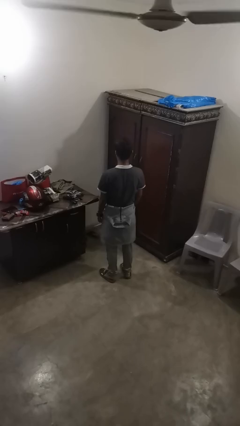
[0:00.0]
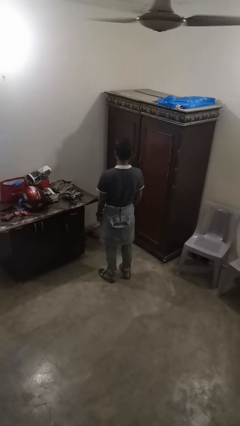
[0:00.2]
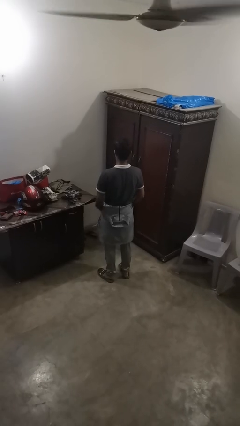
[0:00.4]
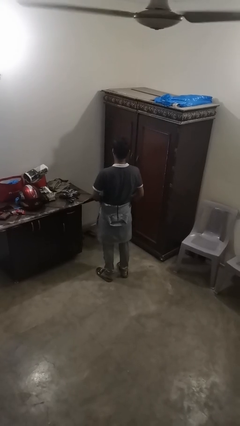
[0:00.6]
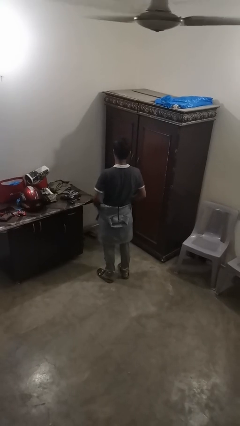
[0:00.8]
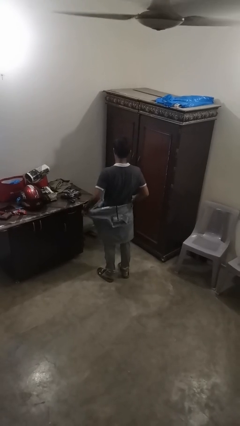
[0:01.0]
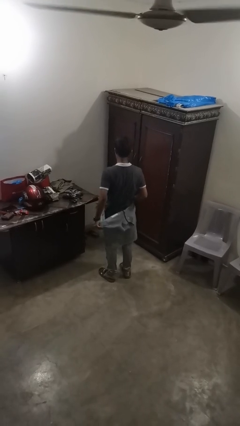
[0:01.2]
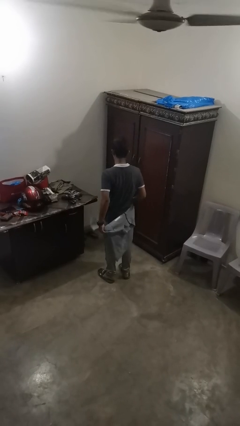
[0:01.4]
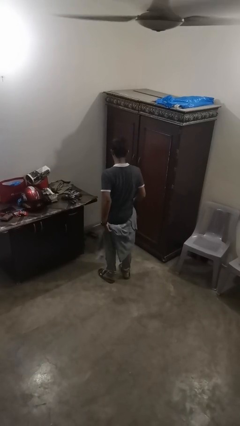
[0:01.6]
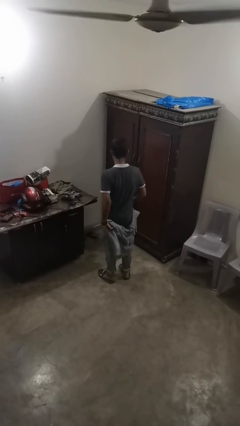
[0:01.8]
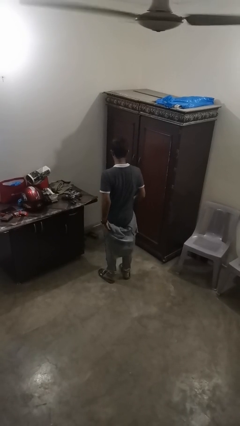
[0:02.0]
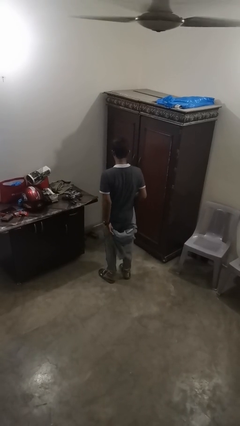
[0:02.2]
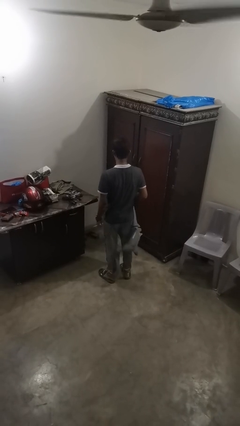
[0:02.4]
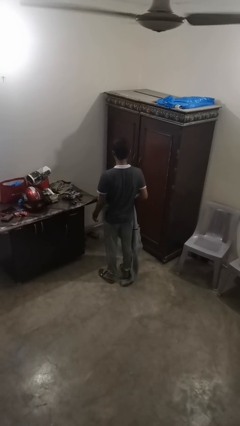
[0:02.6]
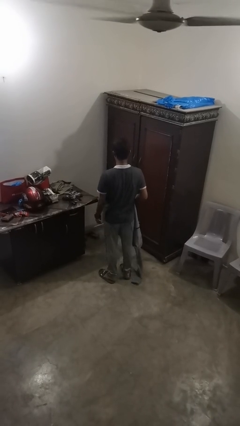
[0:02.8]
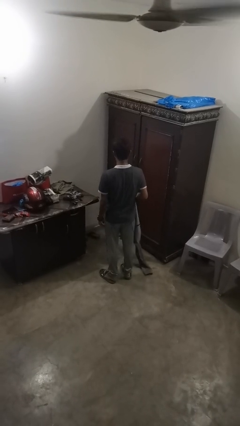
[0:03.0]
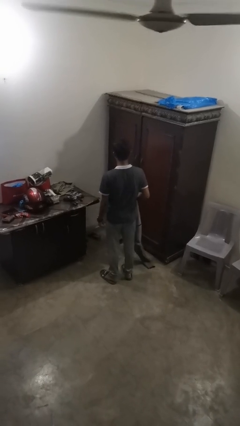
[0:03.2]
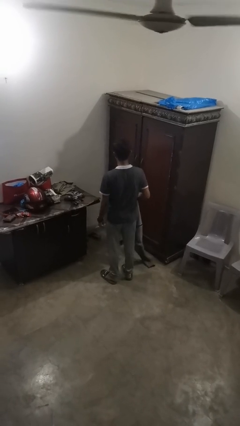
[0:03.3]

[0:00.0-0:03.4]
person unties jacket around waist

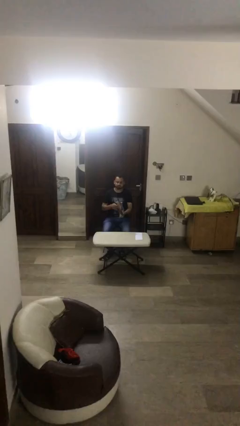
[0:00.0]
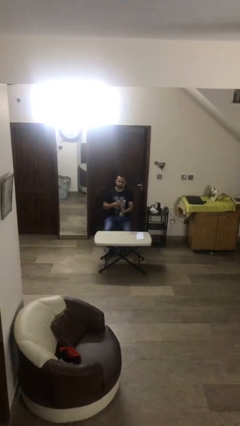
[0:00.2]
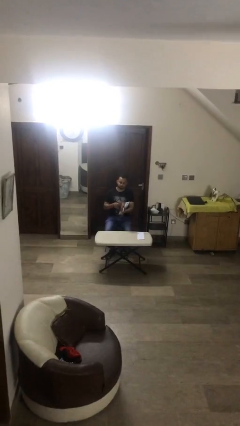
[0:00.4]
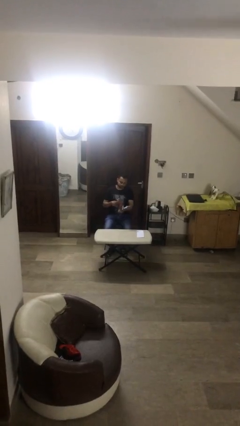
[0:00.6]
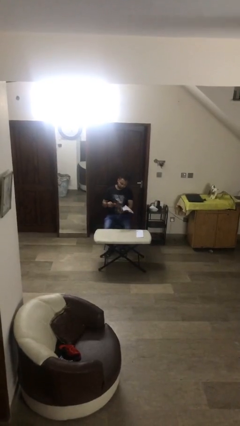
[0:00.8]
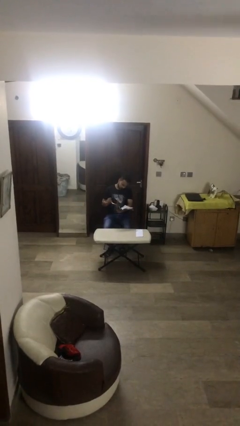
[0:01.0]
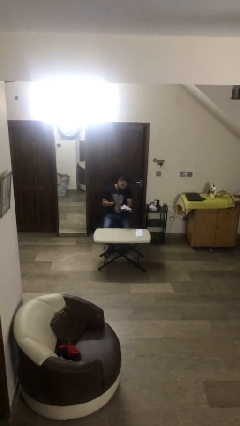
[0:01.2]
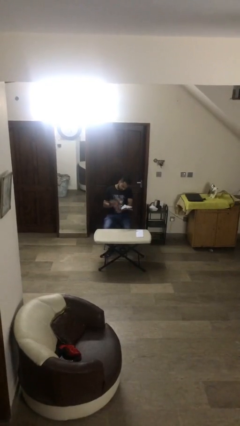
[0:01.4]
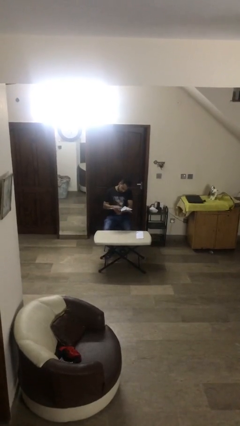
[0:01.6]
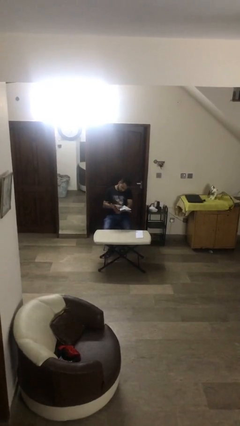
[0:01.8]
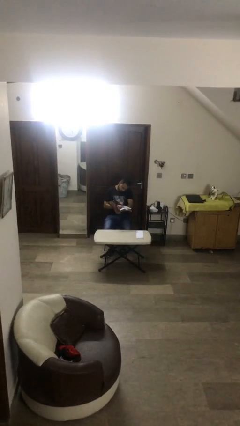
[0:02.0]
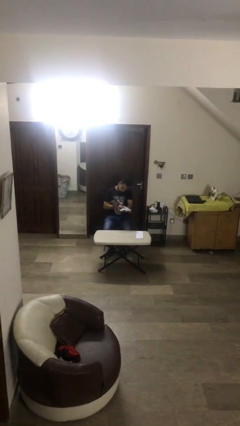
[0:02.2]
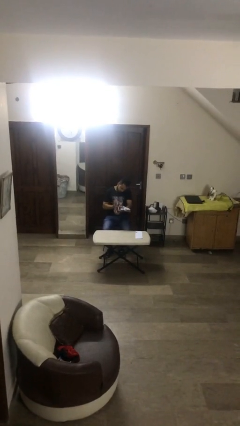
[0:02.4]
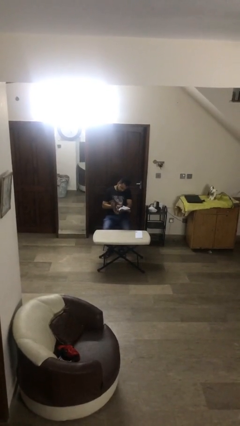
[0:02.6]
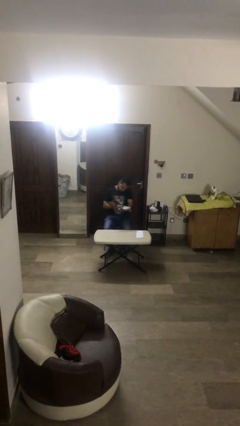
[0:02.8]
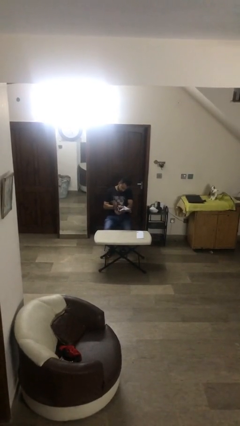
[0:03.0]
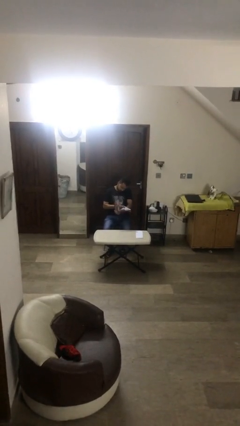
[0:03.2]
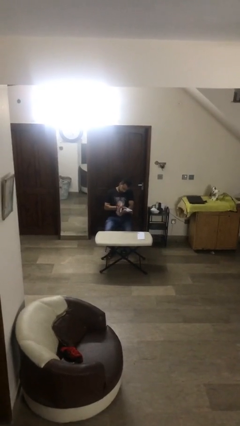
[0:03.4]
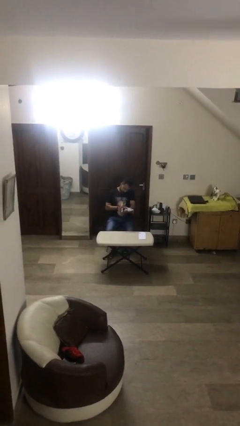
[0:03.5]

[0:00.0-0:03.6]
person reads document

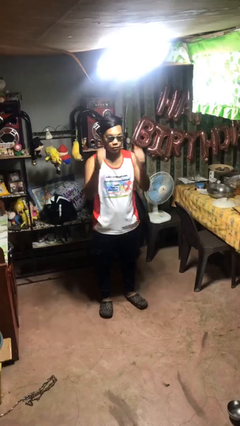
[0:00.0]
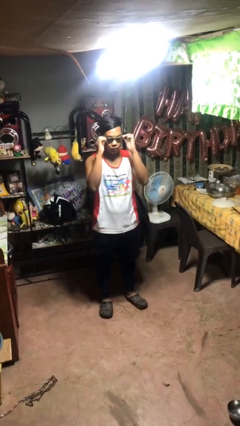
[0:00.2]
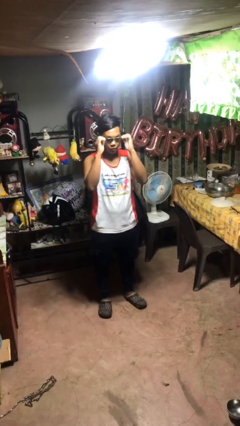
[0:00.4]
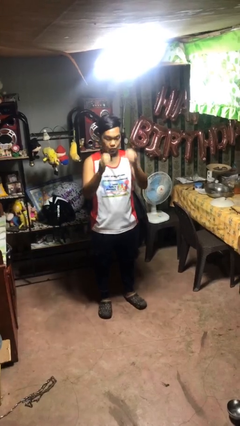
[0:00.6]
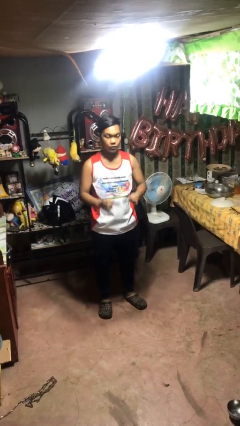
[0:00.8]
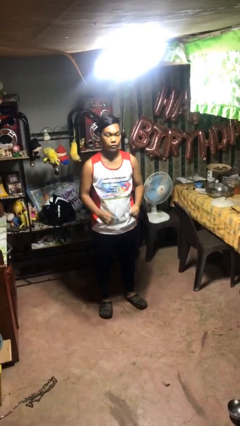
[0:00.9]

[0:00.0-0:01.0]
person takes off sunglasses

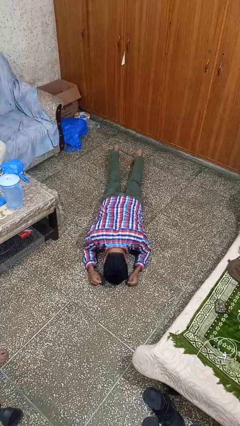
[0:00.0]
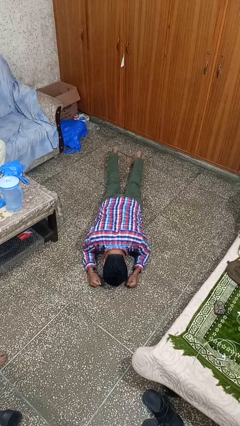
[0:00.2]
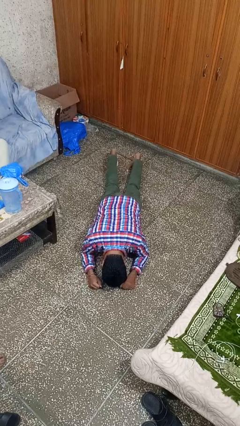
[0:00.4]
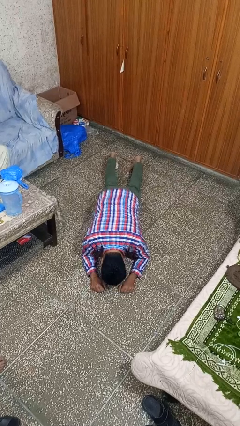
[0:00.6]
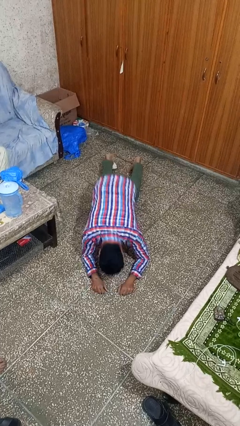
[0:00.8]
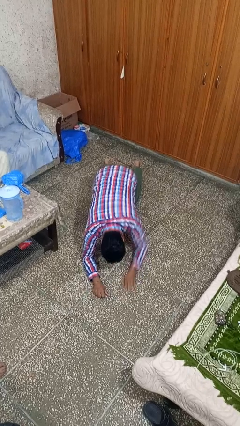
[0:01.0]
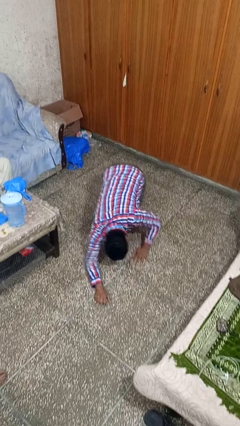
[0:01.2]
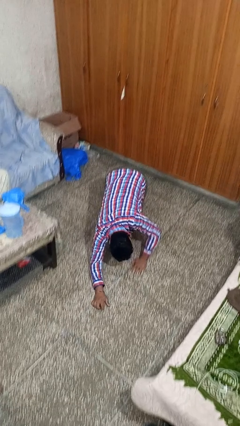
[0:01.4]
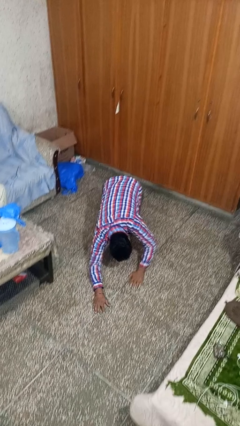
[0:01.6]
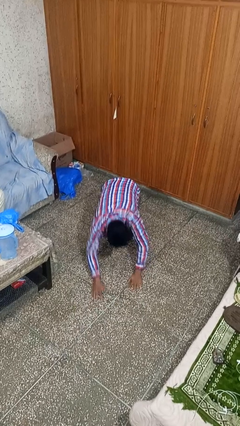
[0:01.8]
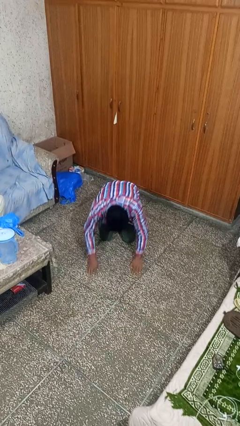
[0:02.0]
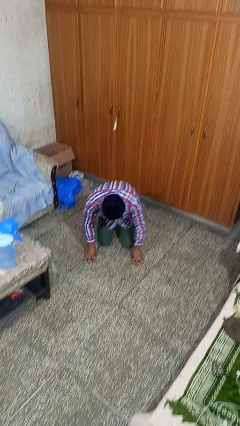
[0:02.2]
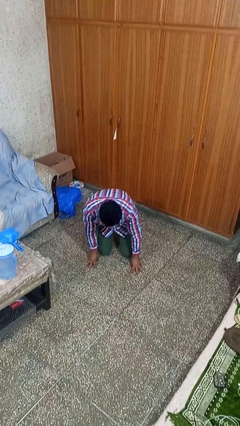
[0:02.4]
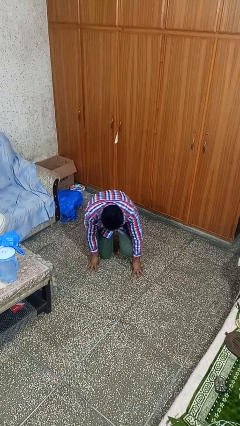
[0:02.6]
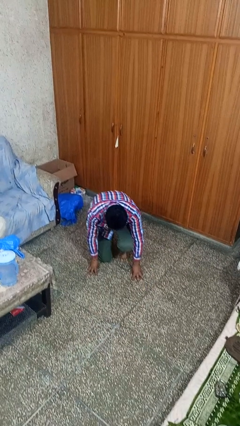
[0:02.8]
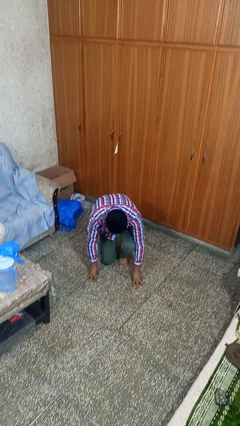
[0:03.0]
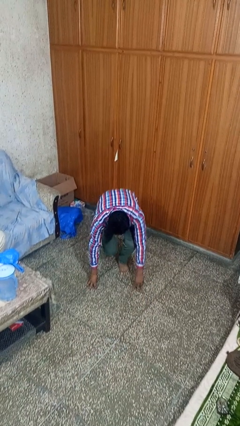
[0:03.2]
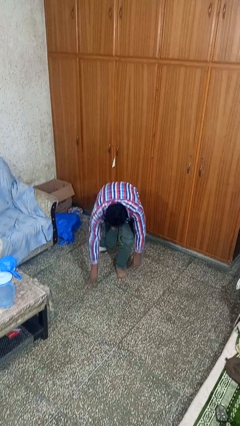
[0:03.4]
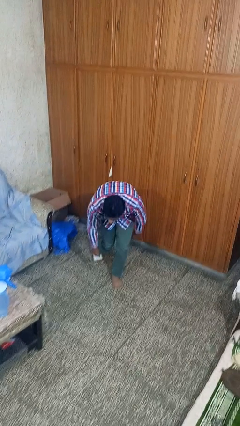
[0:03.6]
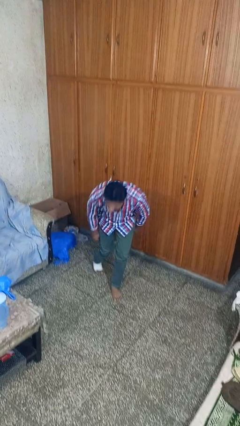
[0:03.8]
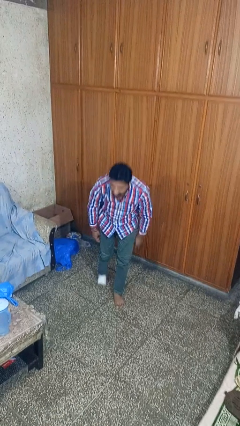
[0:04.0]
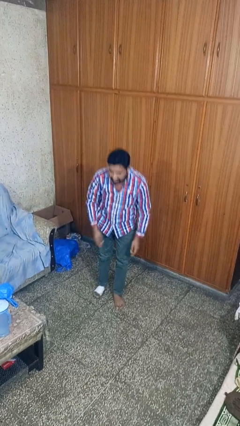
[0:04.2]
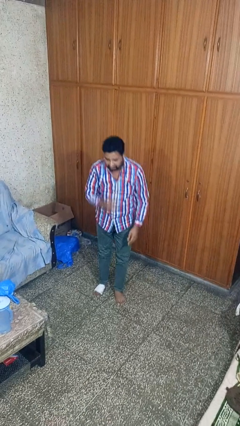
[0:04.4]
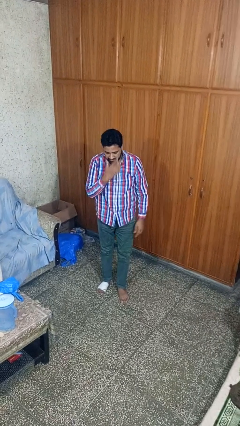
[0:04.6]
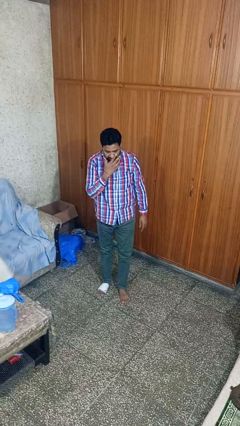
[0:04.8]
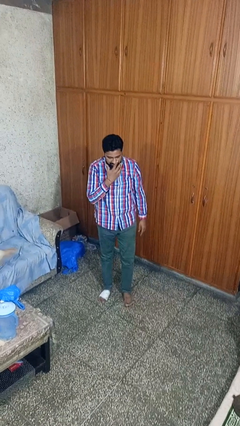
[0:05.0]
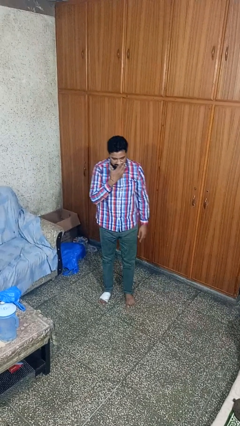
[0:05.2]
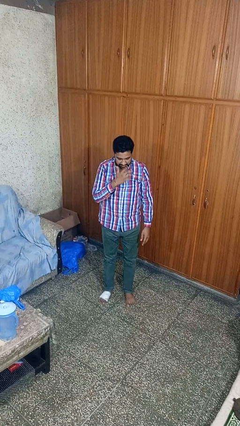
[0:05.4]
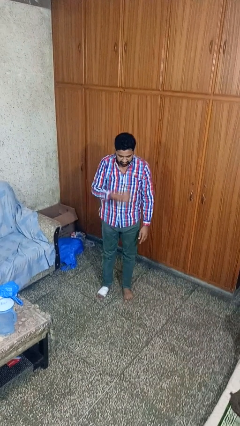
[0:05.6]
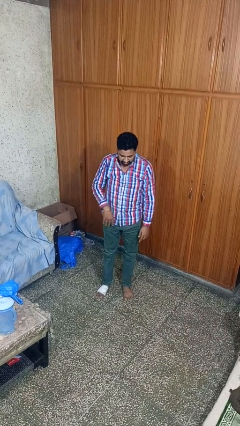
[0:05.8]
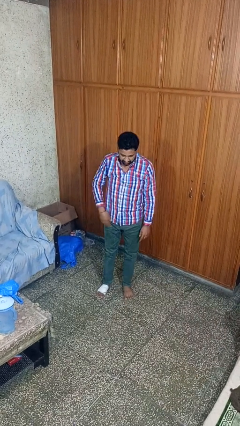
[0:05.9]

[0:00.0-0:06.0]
person stands up from floor

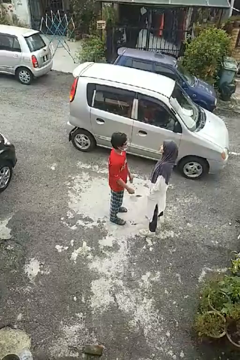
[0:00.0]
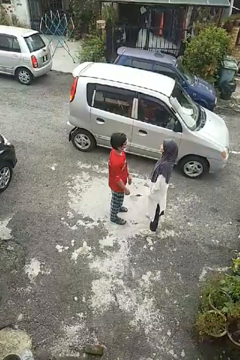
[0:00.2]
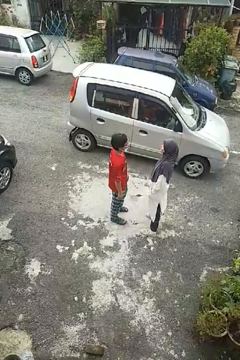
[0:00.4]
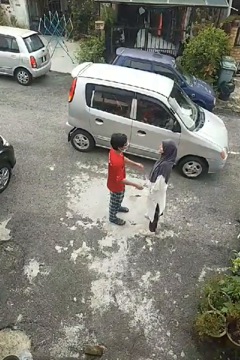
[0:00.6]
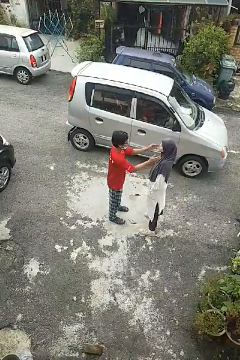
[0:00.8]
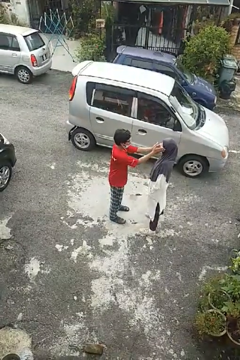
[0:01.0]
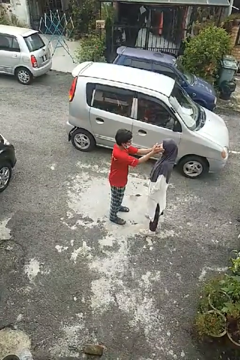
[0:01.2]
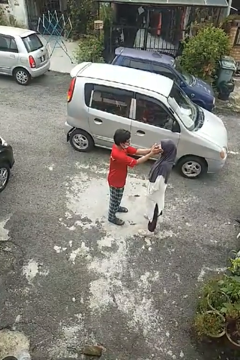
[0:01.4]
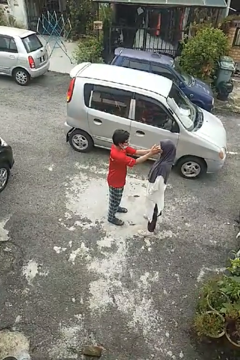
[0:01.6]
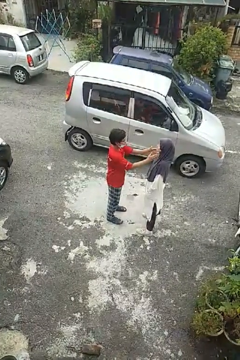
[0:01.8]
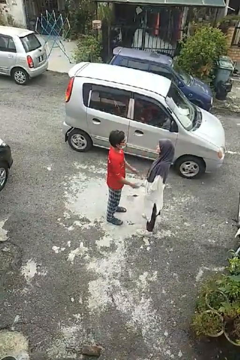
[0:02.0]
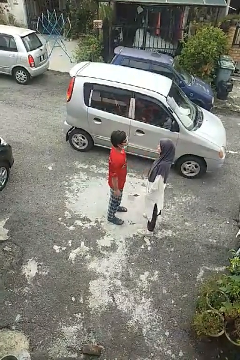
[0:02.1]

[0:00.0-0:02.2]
person touches face of person

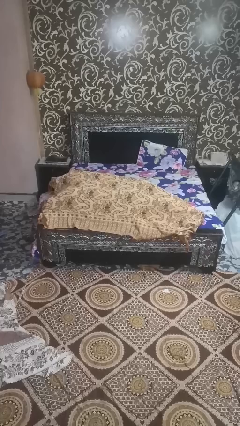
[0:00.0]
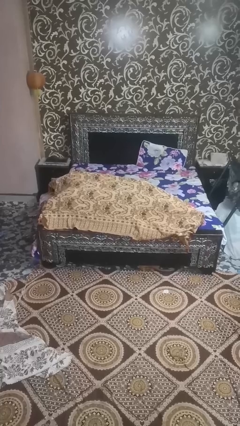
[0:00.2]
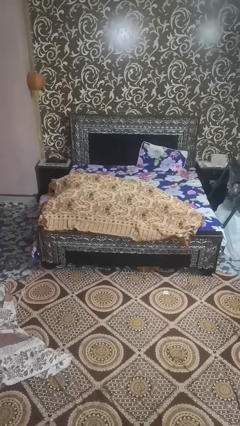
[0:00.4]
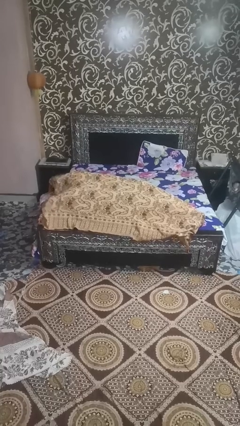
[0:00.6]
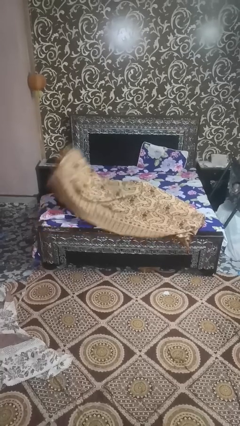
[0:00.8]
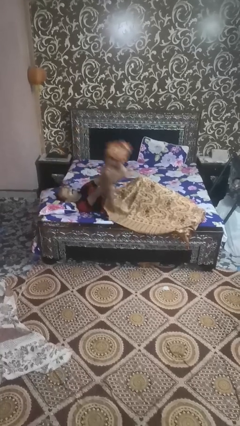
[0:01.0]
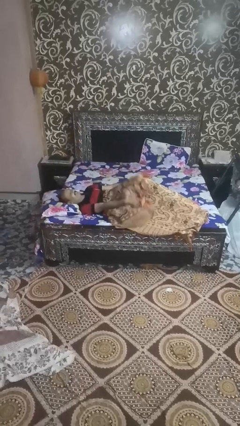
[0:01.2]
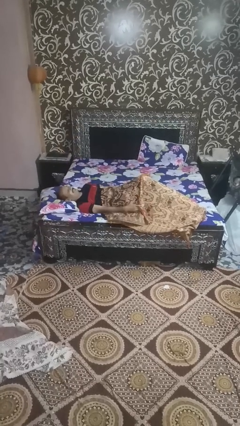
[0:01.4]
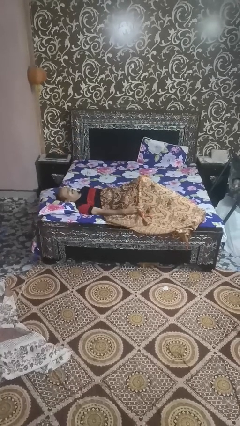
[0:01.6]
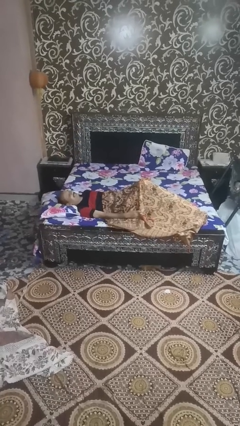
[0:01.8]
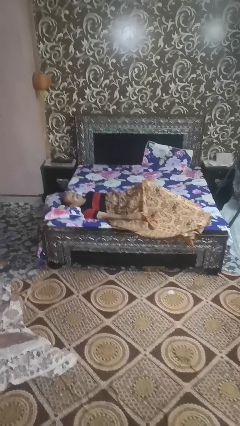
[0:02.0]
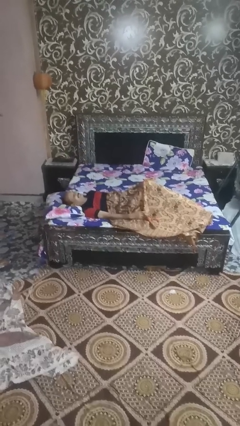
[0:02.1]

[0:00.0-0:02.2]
person uncovers with blanket
